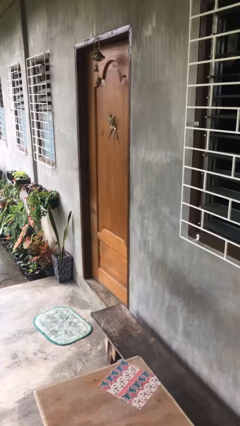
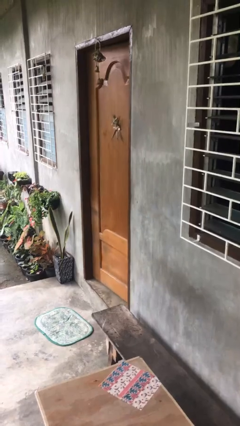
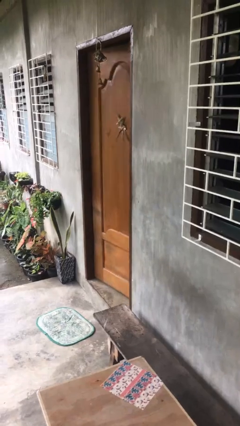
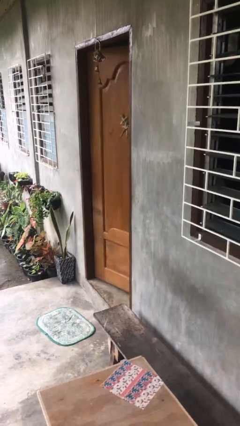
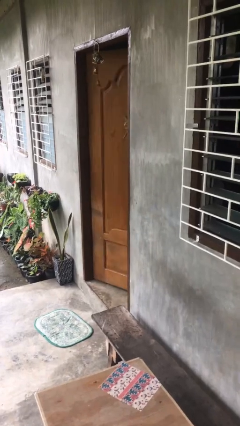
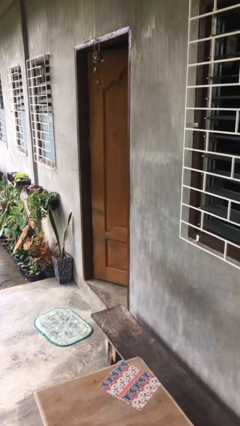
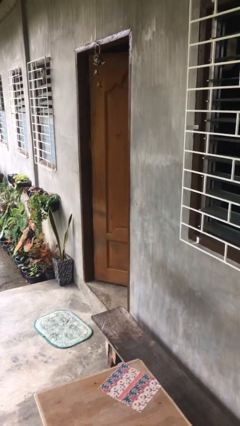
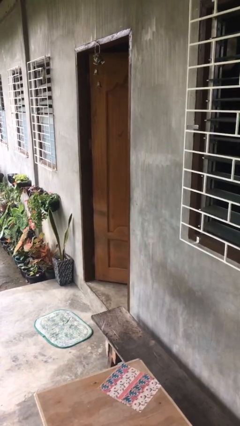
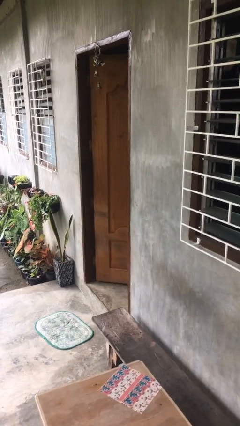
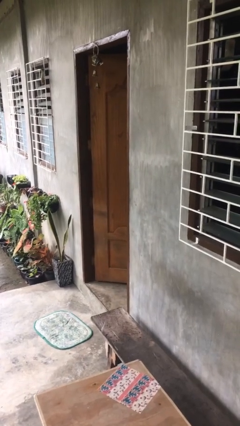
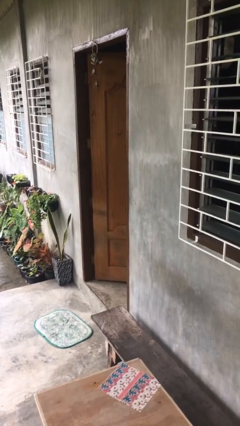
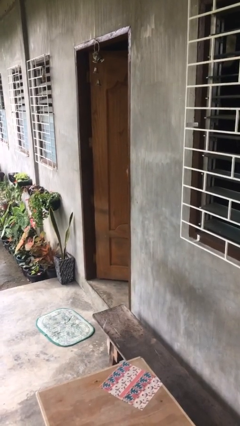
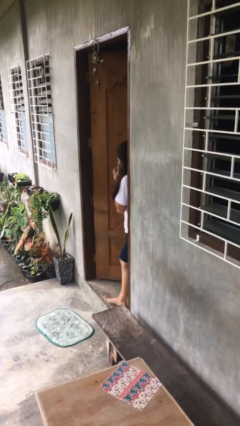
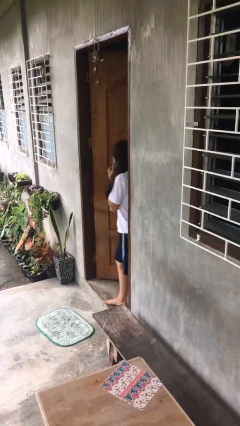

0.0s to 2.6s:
person opens facility door

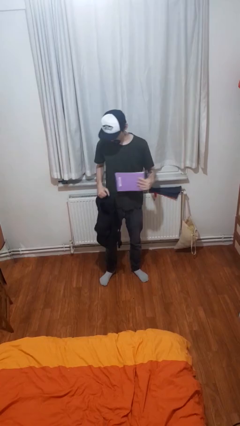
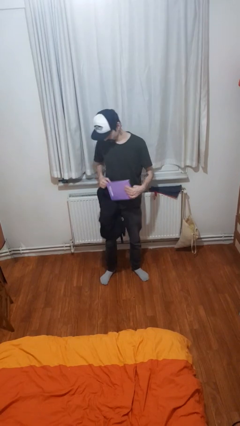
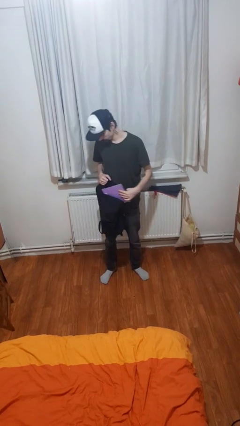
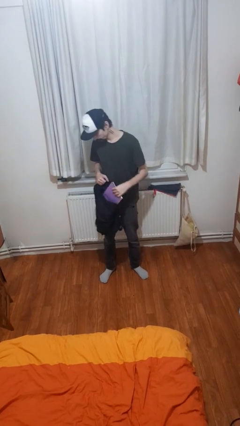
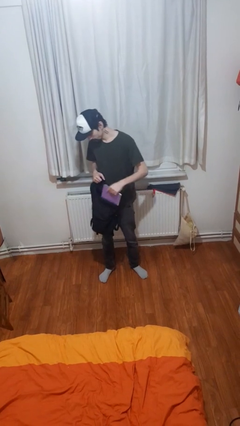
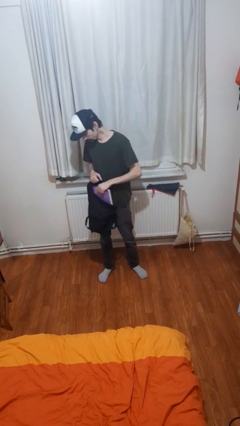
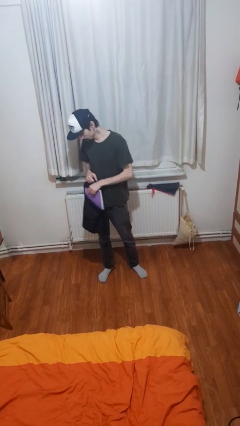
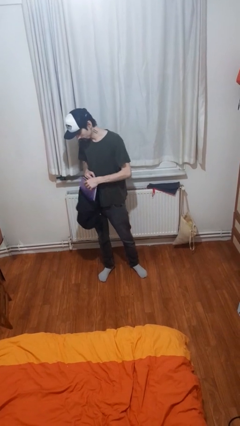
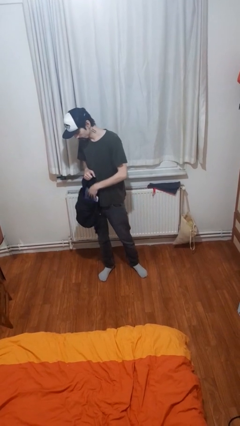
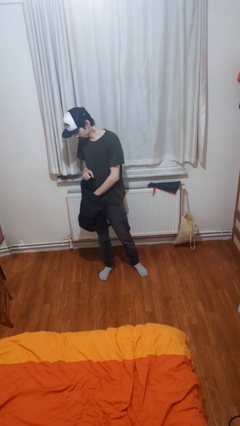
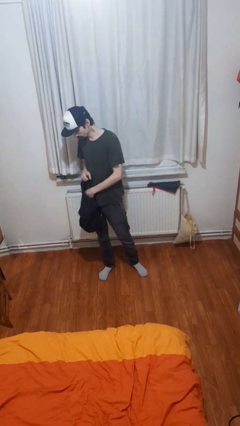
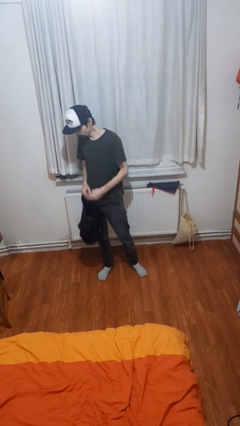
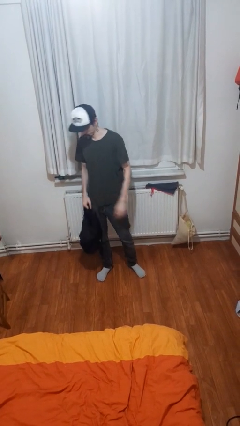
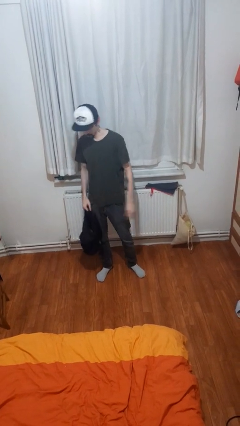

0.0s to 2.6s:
person puts object into backpack

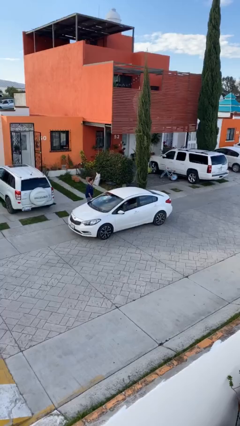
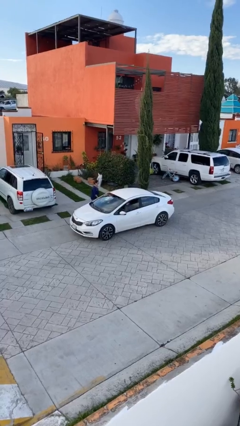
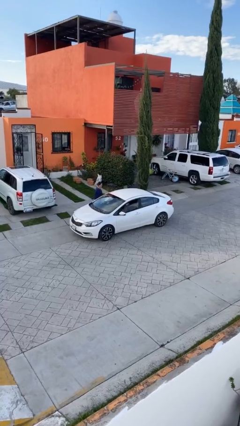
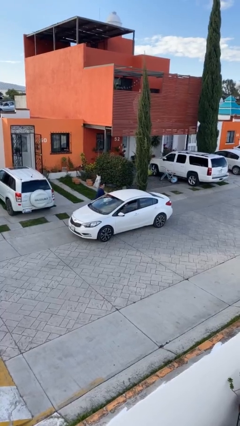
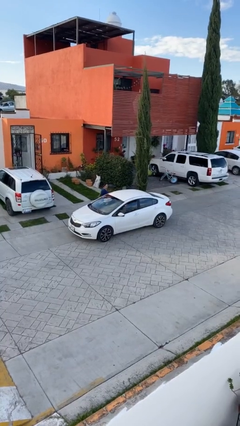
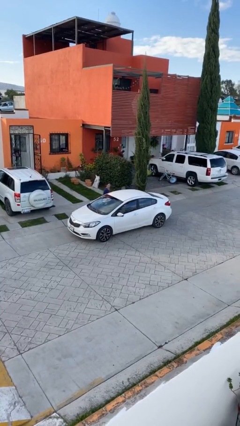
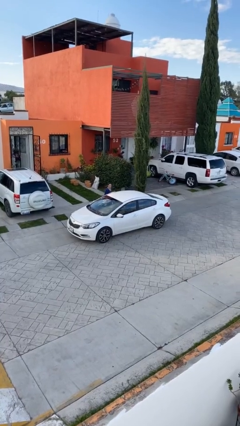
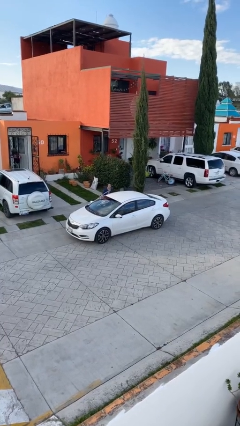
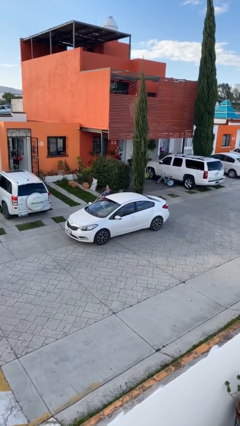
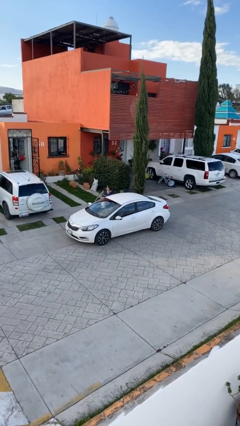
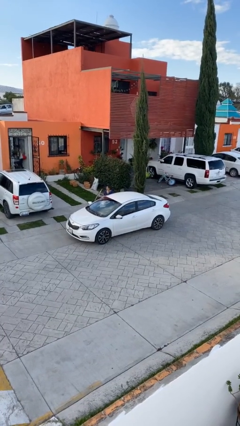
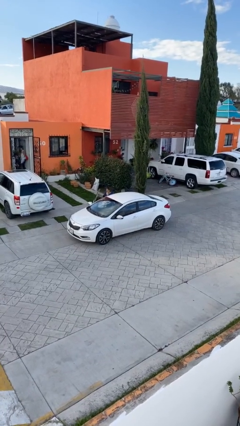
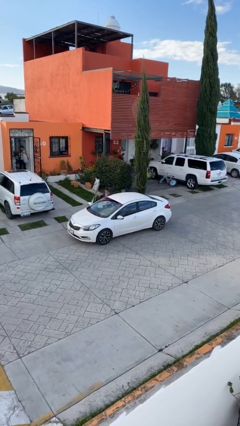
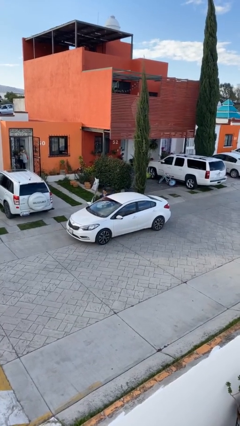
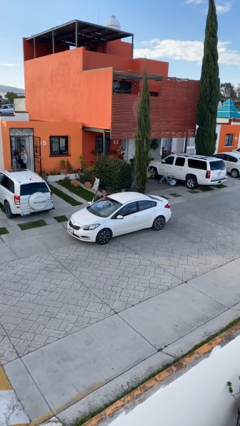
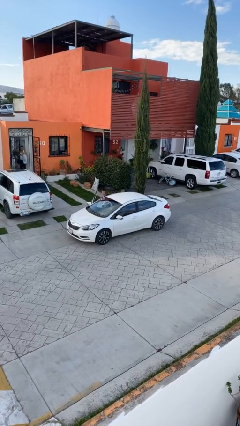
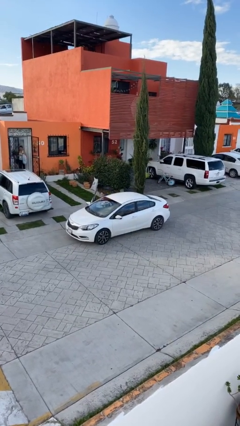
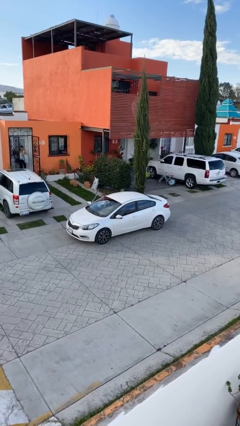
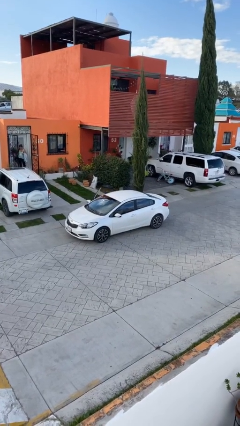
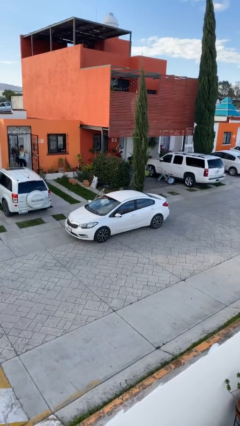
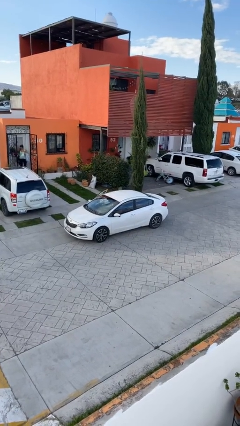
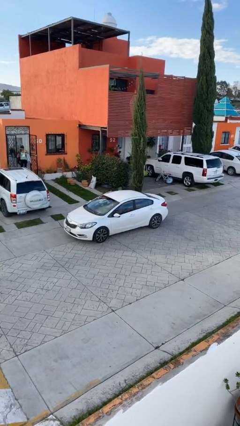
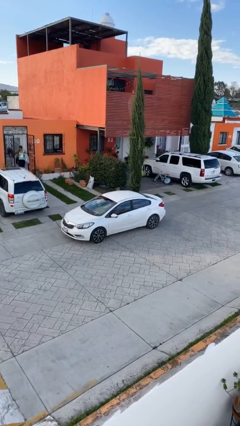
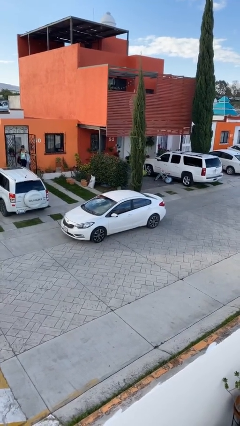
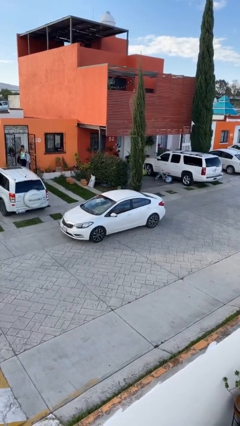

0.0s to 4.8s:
car picks up person

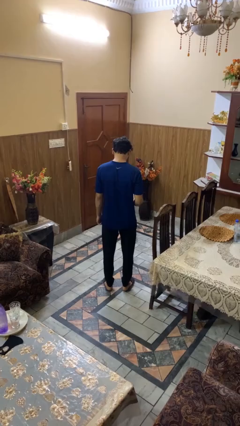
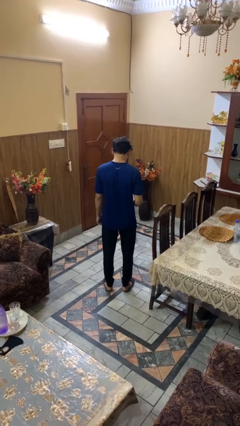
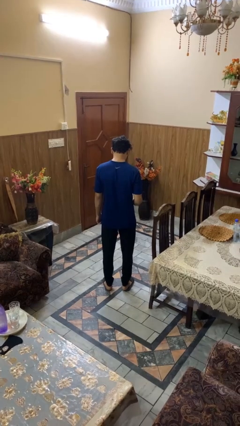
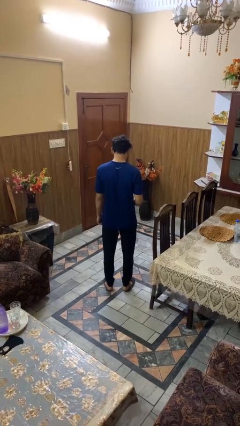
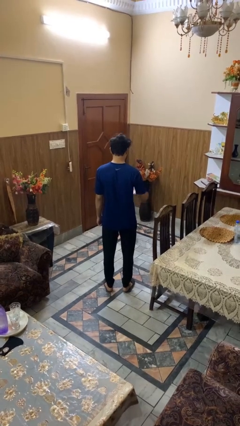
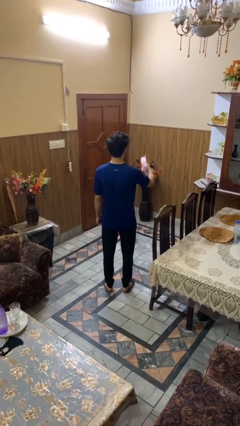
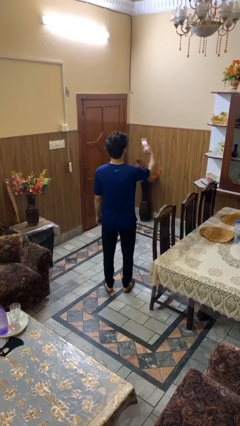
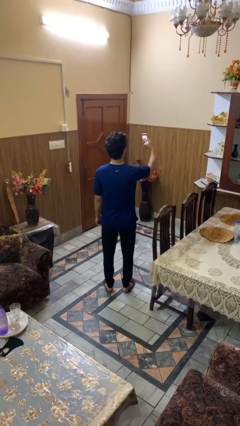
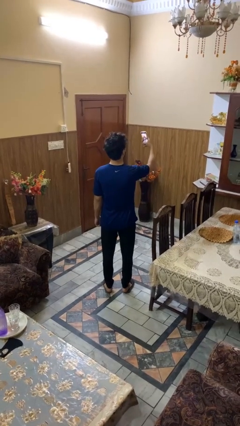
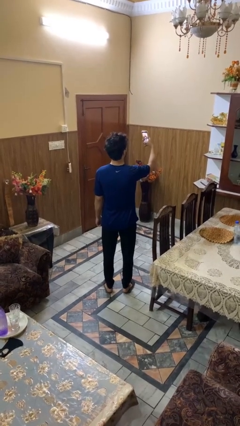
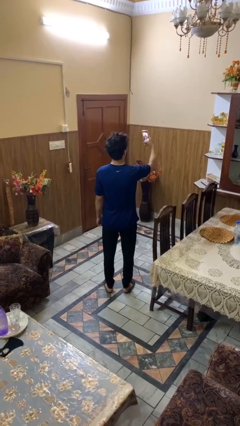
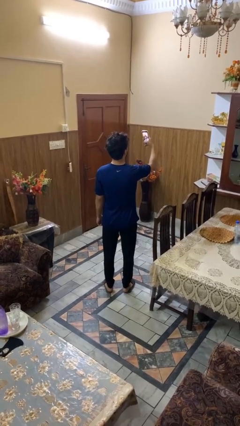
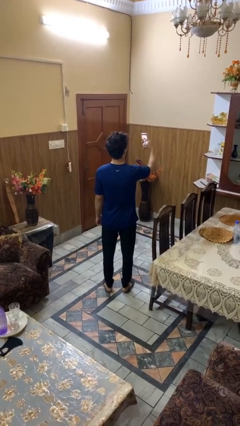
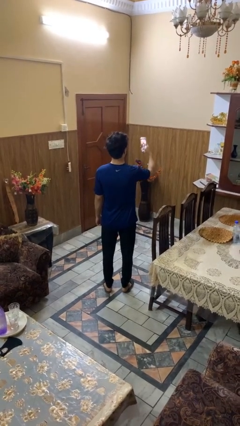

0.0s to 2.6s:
person takes selfie

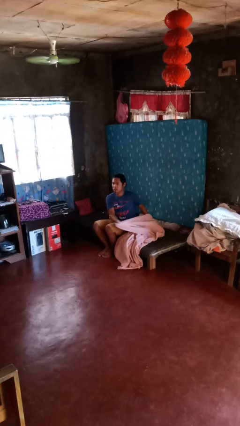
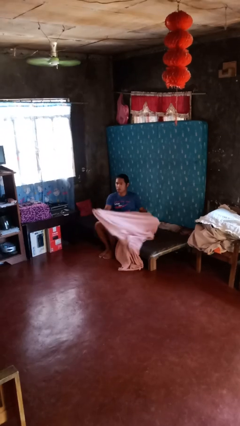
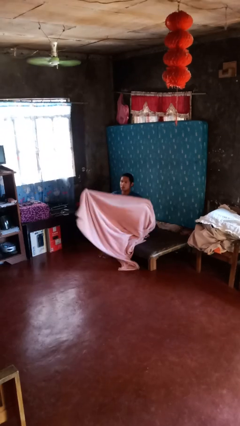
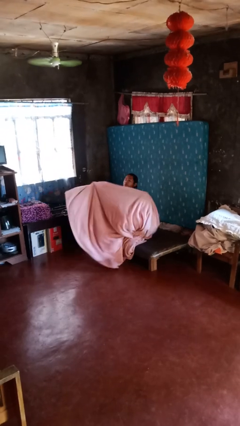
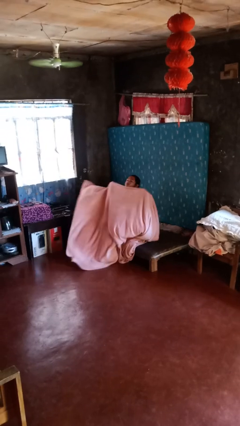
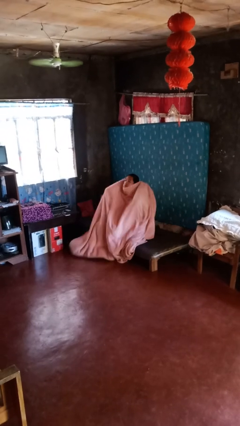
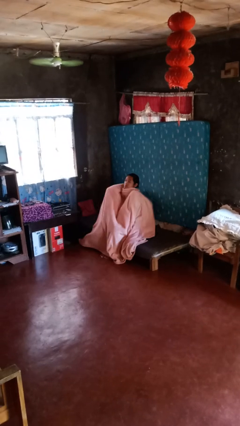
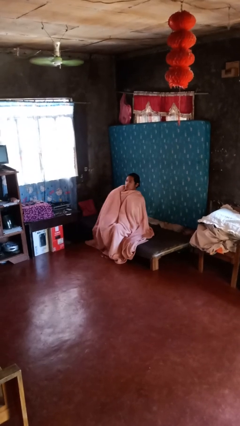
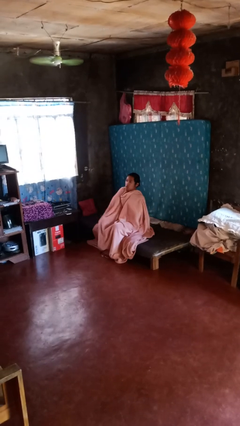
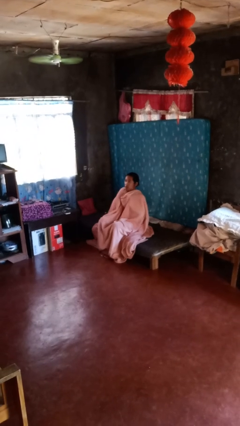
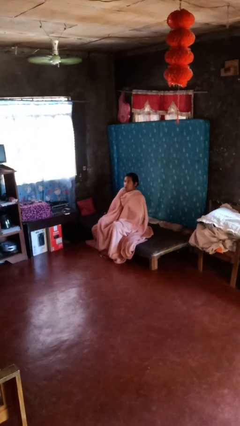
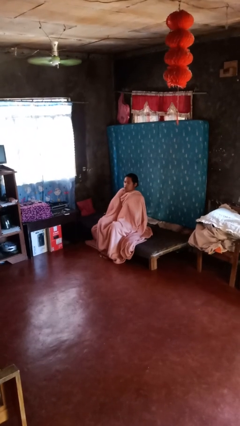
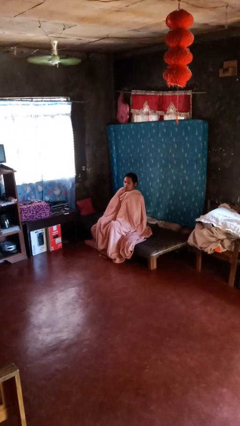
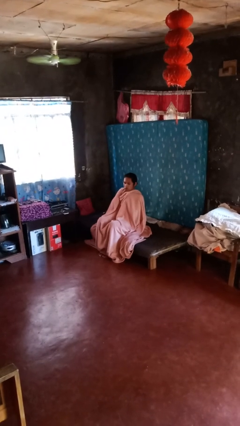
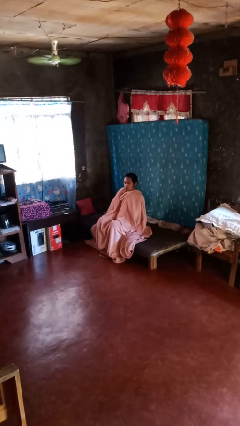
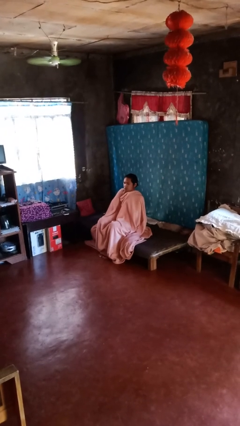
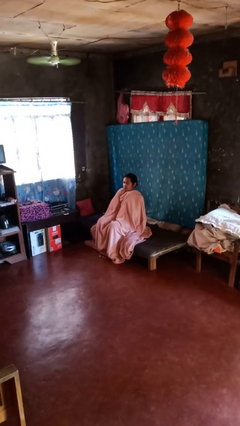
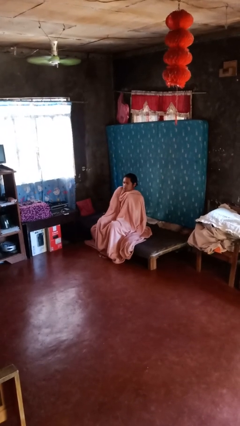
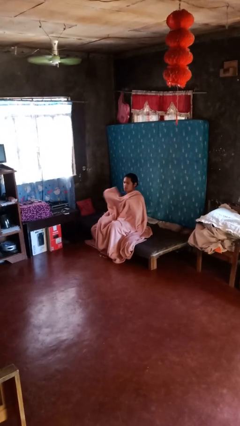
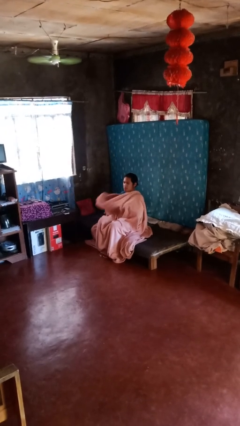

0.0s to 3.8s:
person covers with blanket

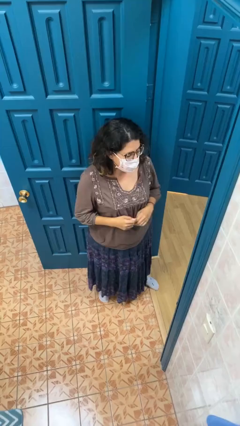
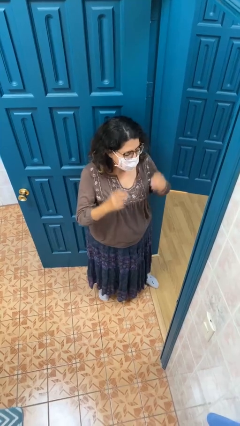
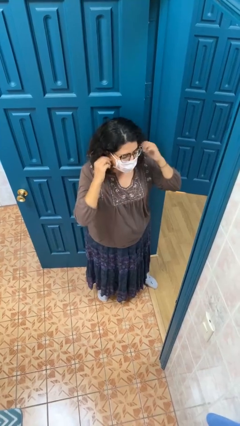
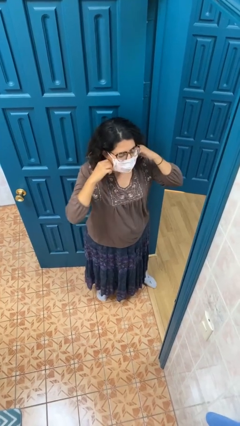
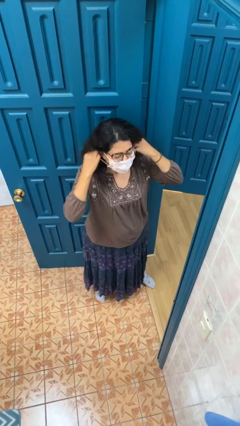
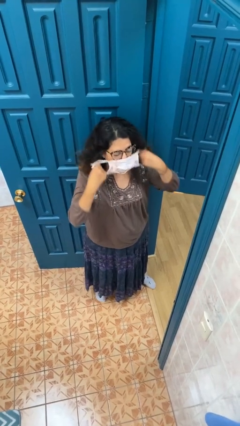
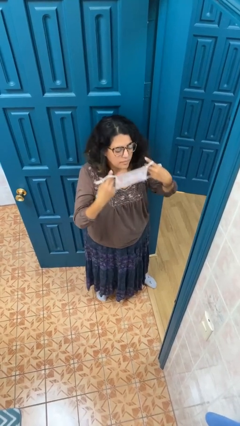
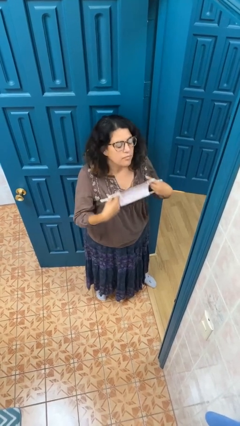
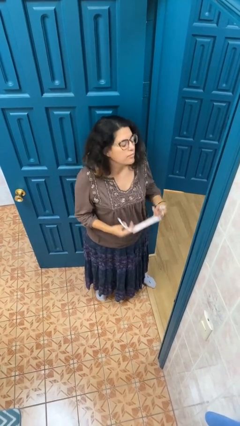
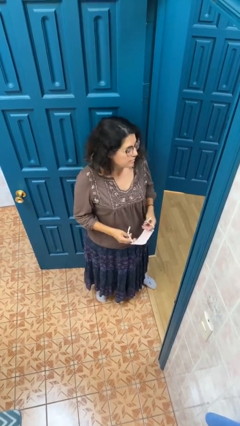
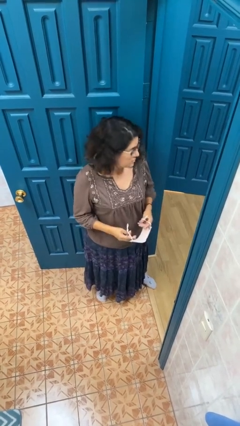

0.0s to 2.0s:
person takes off facemask
